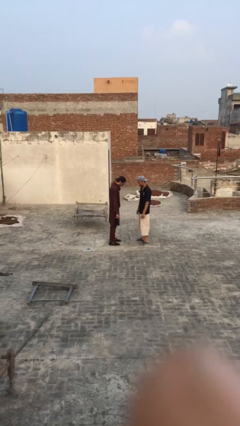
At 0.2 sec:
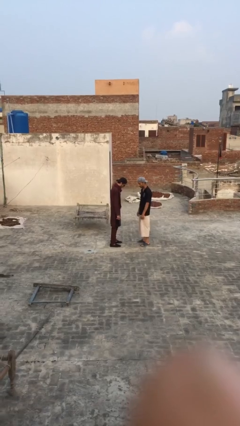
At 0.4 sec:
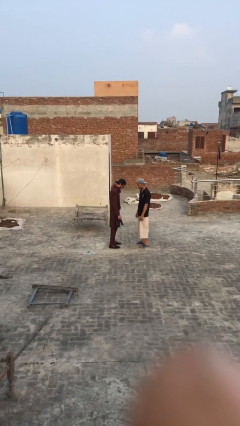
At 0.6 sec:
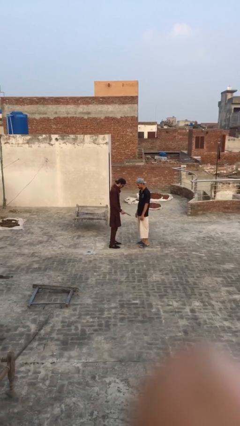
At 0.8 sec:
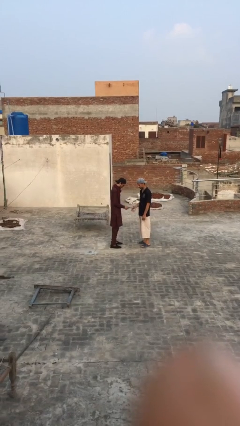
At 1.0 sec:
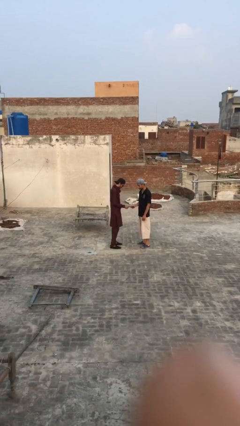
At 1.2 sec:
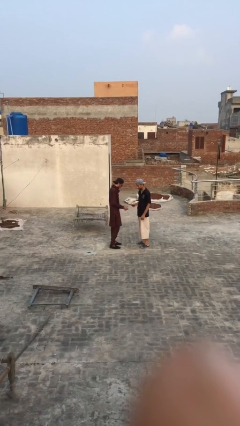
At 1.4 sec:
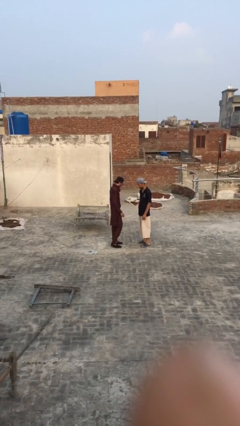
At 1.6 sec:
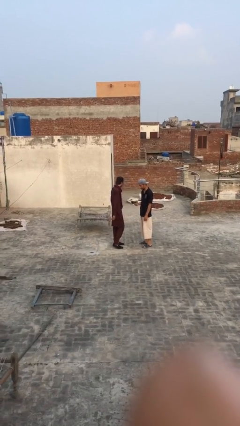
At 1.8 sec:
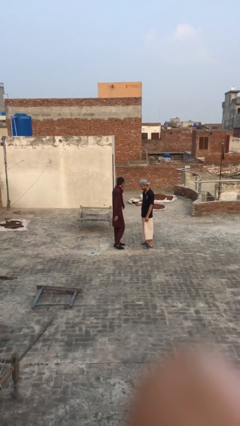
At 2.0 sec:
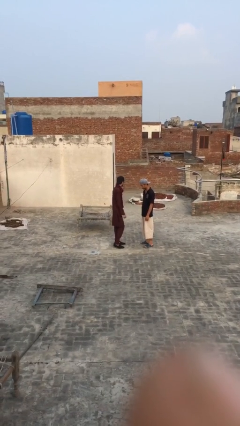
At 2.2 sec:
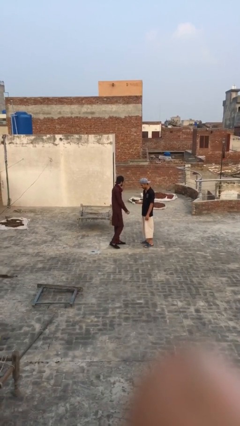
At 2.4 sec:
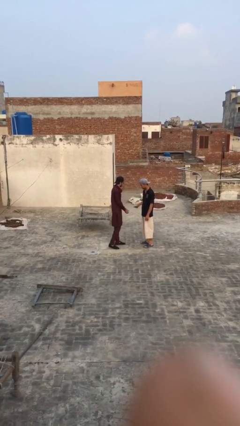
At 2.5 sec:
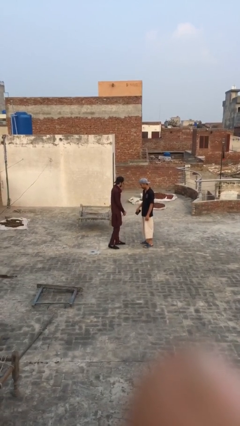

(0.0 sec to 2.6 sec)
person transfers object to person

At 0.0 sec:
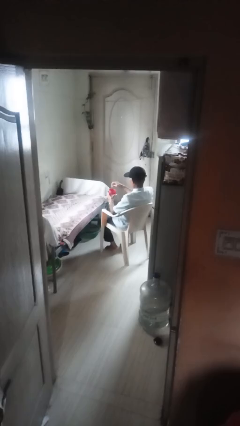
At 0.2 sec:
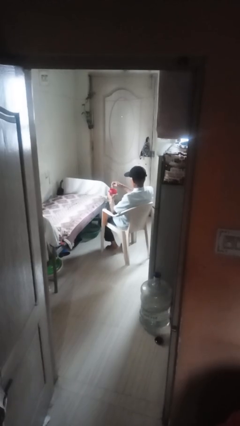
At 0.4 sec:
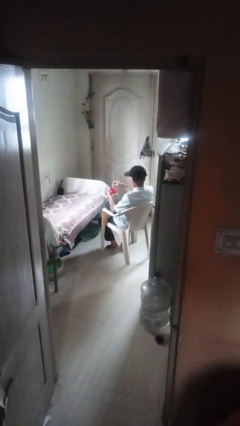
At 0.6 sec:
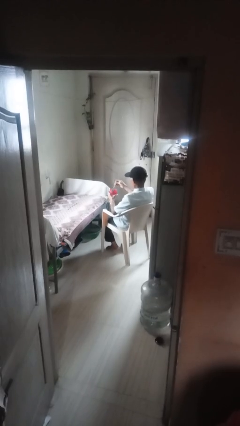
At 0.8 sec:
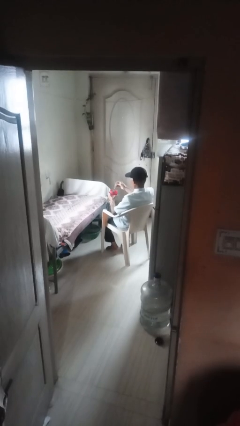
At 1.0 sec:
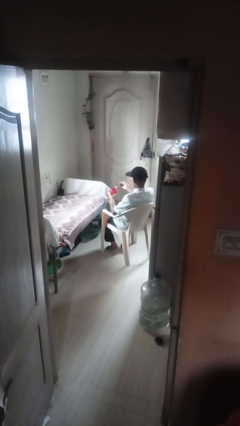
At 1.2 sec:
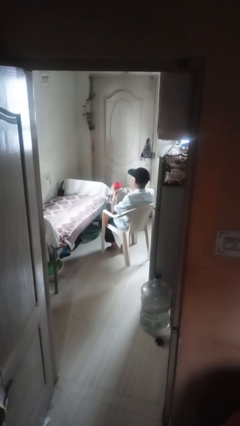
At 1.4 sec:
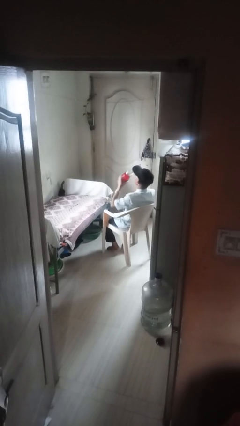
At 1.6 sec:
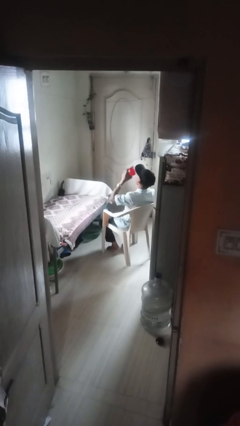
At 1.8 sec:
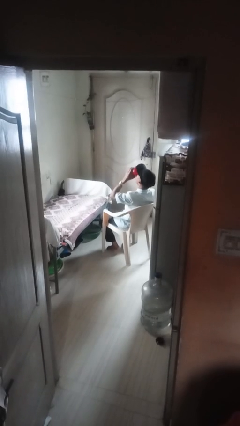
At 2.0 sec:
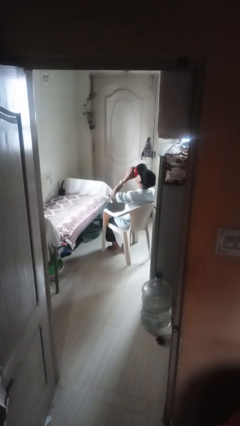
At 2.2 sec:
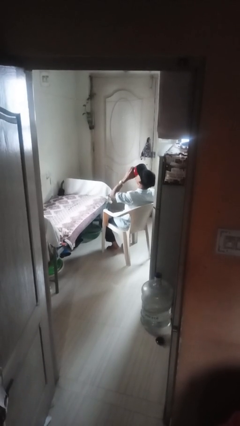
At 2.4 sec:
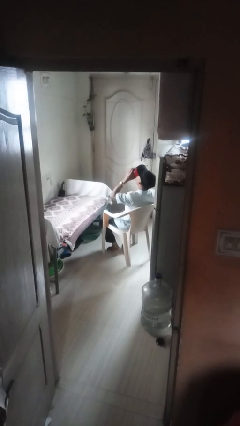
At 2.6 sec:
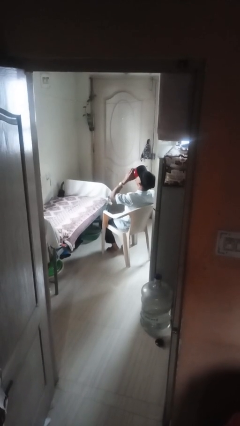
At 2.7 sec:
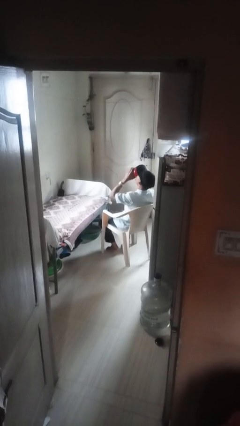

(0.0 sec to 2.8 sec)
person drinks from mug

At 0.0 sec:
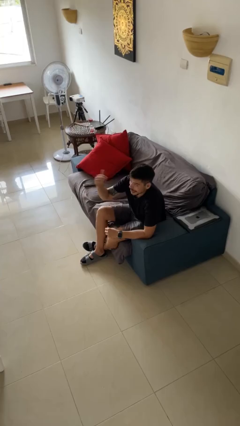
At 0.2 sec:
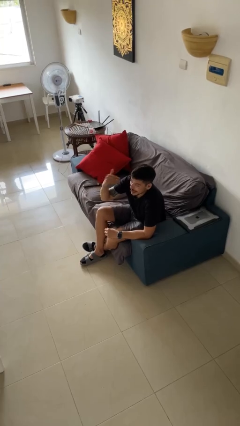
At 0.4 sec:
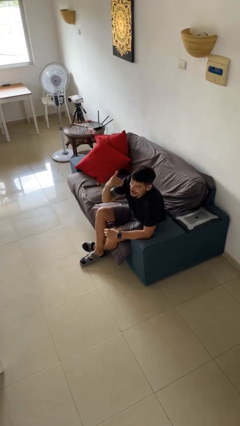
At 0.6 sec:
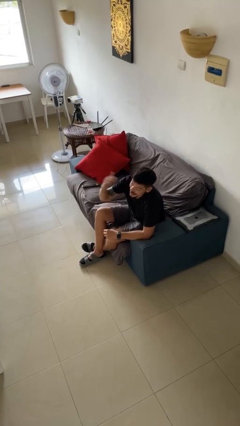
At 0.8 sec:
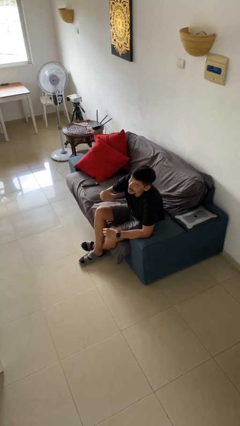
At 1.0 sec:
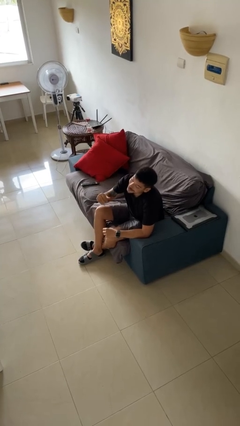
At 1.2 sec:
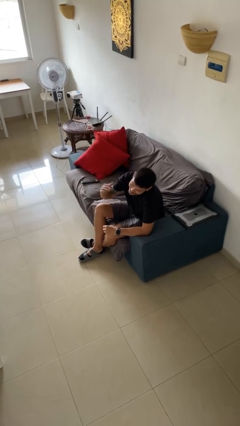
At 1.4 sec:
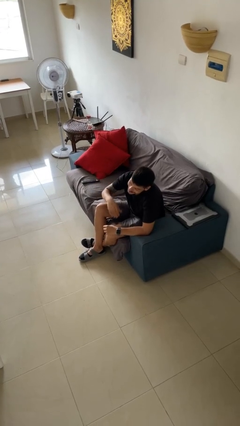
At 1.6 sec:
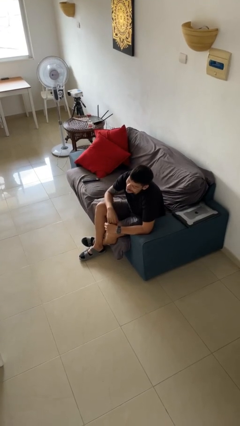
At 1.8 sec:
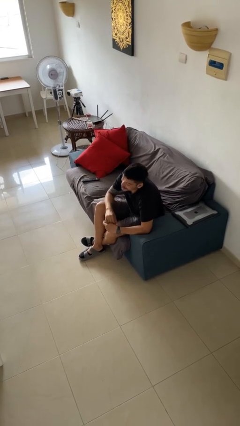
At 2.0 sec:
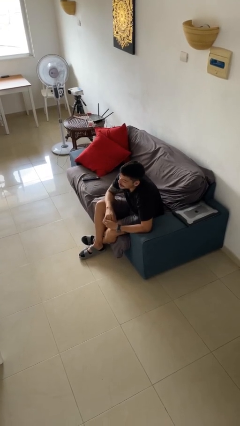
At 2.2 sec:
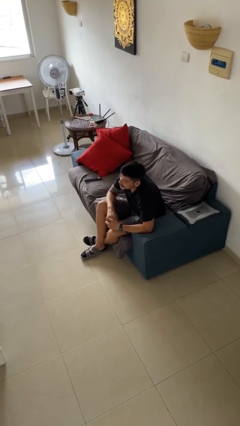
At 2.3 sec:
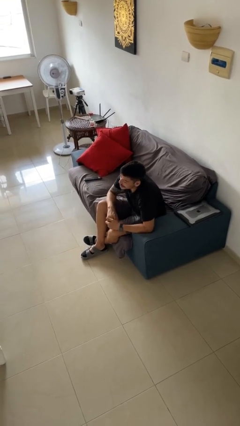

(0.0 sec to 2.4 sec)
person gestures come here

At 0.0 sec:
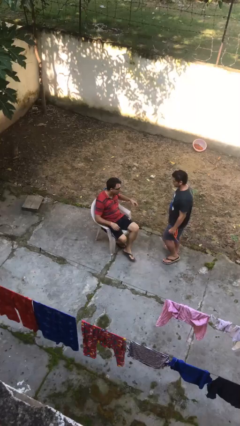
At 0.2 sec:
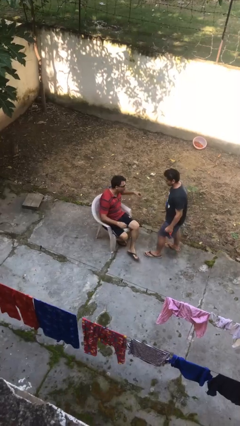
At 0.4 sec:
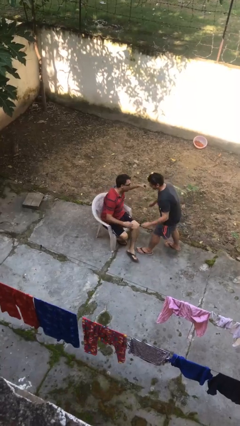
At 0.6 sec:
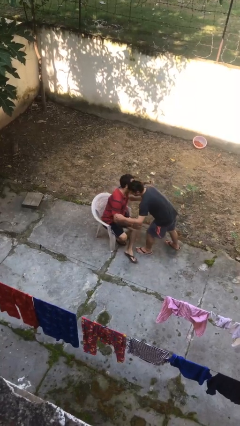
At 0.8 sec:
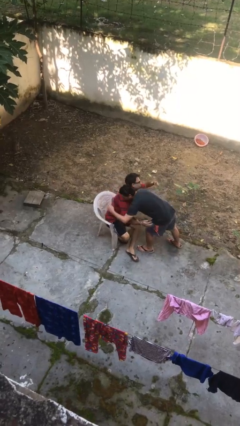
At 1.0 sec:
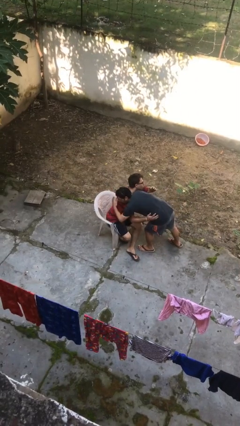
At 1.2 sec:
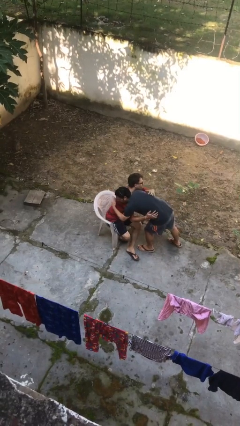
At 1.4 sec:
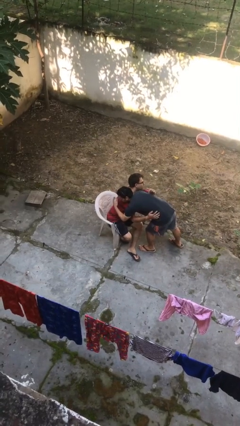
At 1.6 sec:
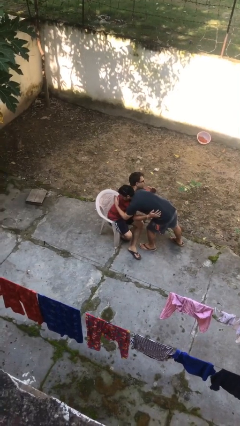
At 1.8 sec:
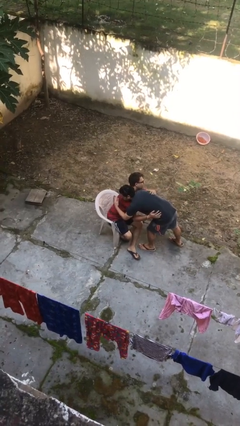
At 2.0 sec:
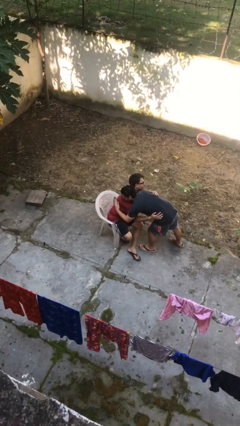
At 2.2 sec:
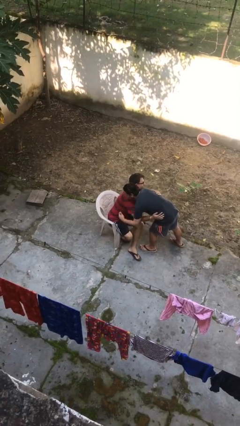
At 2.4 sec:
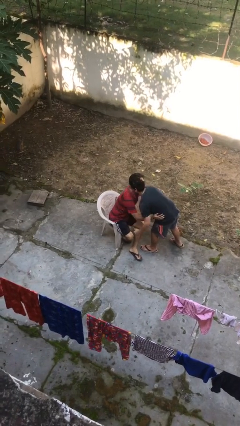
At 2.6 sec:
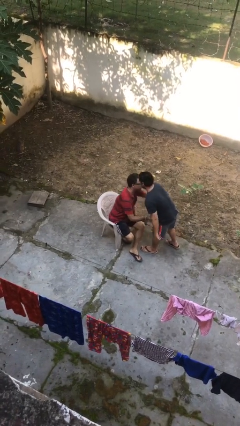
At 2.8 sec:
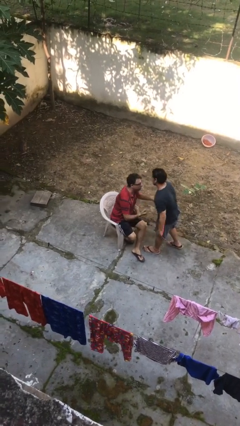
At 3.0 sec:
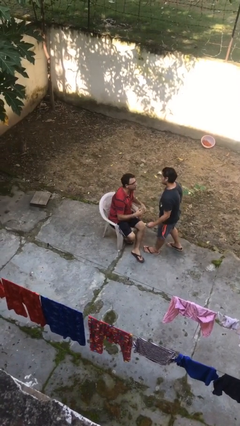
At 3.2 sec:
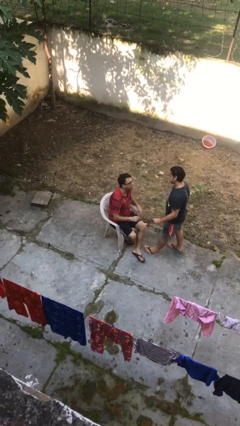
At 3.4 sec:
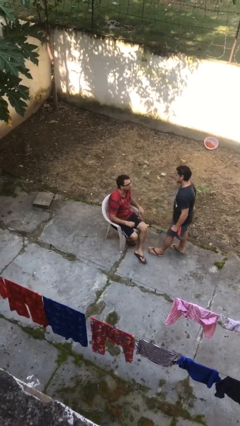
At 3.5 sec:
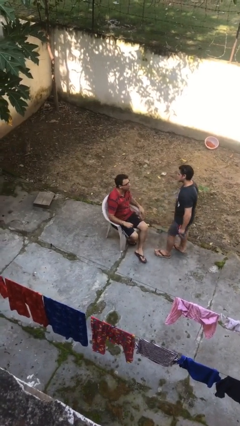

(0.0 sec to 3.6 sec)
person embraces person

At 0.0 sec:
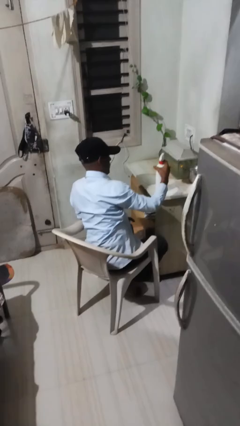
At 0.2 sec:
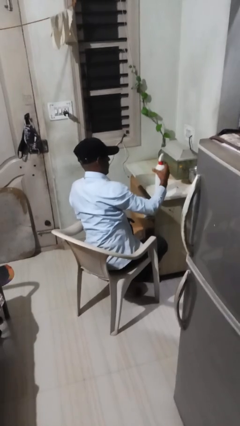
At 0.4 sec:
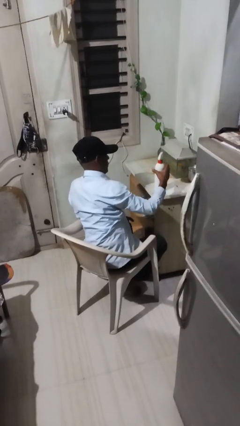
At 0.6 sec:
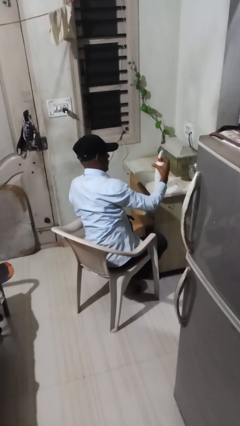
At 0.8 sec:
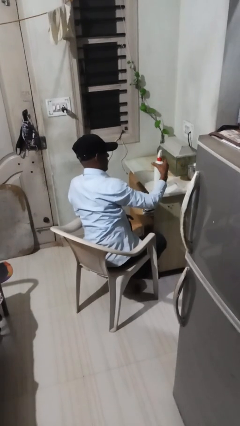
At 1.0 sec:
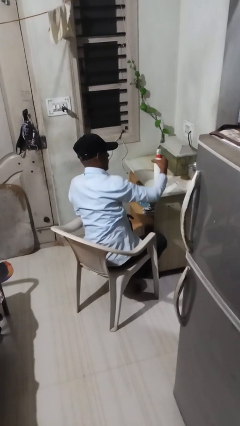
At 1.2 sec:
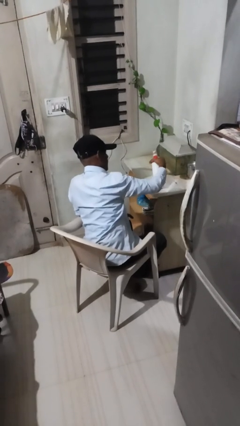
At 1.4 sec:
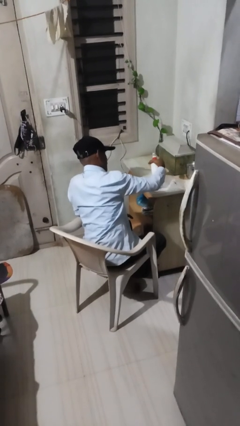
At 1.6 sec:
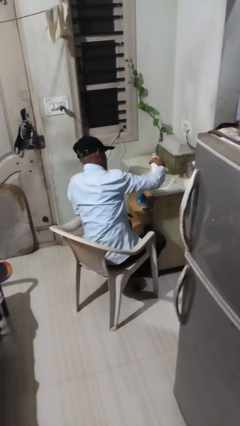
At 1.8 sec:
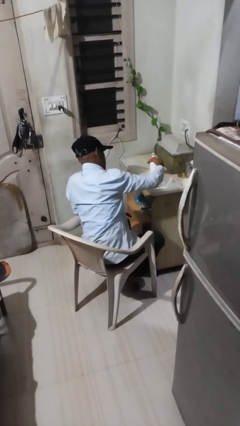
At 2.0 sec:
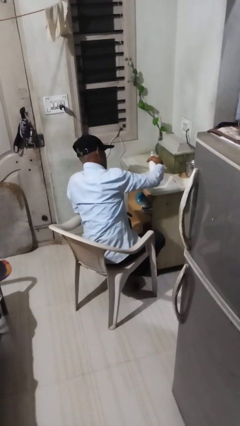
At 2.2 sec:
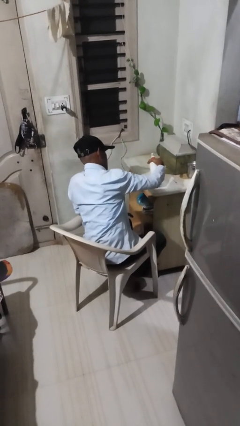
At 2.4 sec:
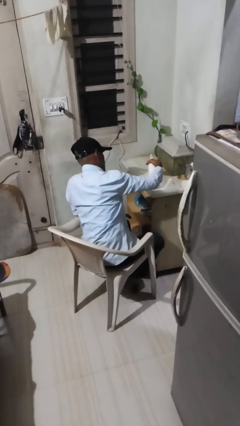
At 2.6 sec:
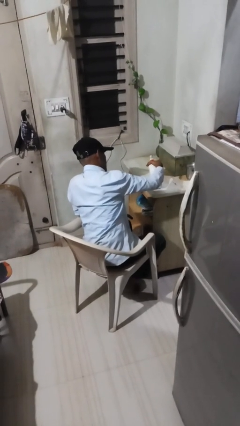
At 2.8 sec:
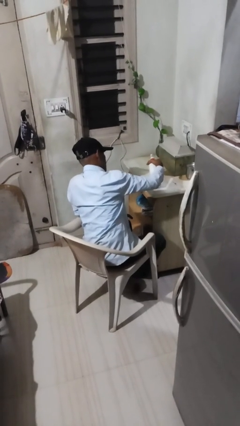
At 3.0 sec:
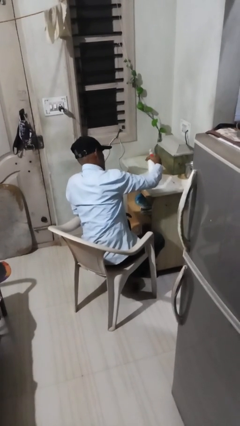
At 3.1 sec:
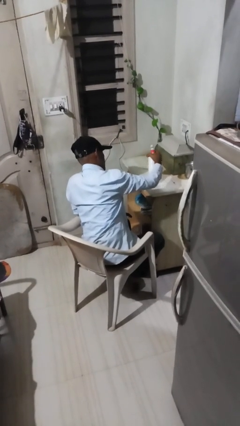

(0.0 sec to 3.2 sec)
person sprays from bottle

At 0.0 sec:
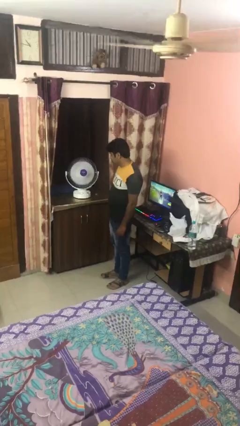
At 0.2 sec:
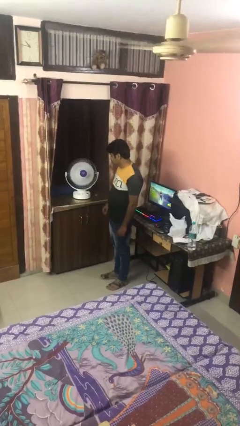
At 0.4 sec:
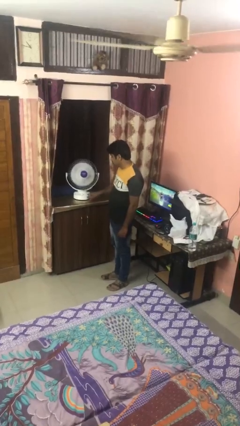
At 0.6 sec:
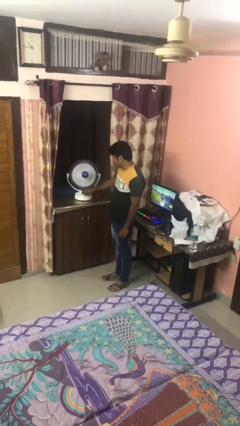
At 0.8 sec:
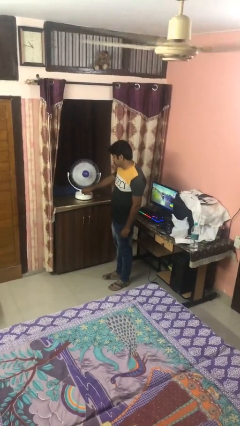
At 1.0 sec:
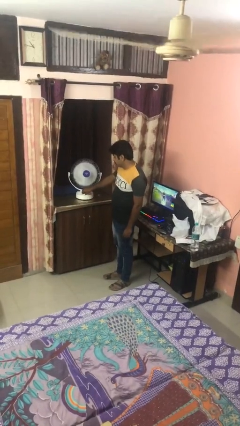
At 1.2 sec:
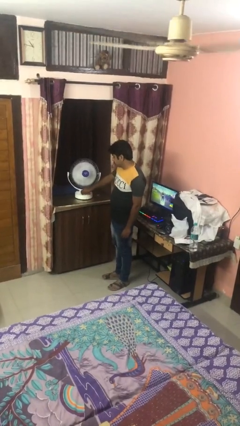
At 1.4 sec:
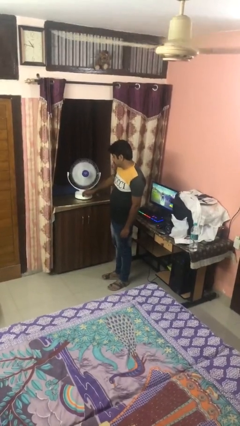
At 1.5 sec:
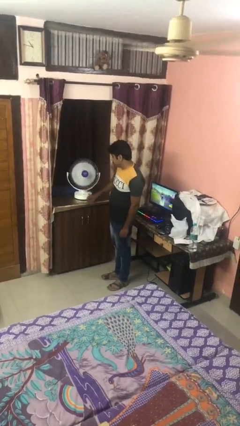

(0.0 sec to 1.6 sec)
person turns off fan

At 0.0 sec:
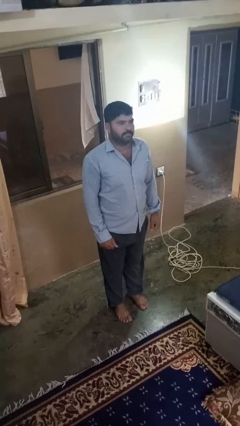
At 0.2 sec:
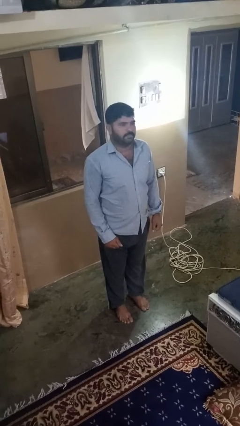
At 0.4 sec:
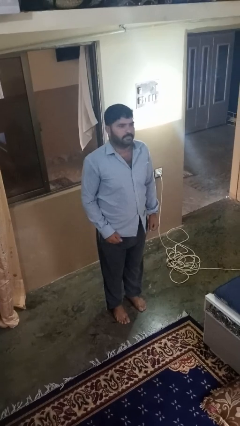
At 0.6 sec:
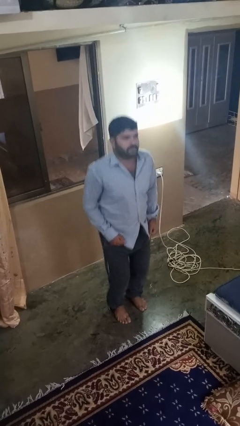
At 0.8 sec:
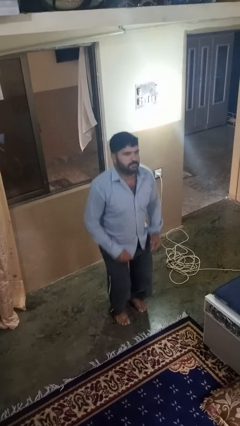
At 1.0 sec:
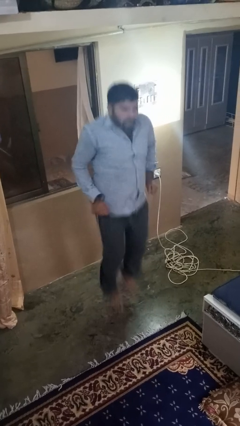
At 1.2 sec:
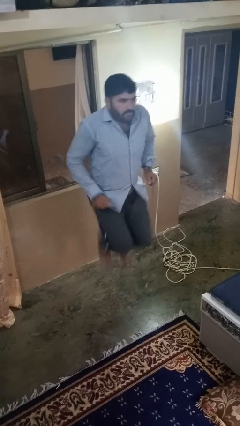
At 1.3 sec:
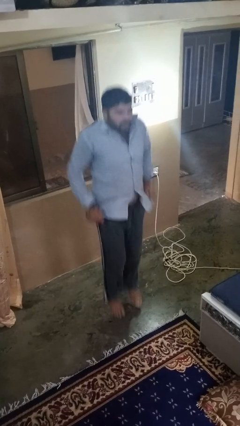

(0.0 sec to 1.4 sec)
person jumps
